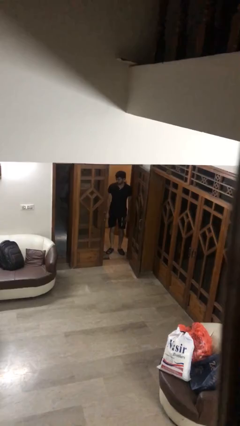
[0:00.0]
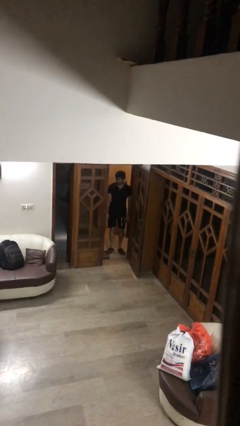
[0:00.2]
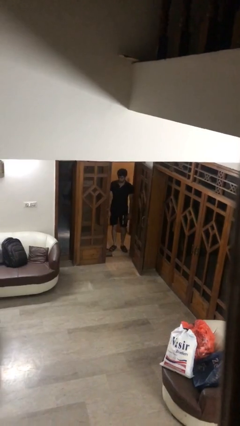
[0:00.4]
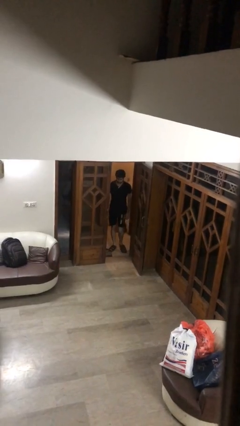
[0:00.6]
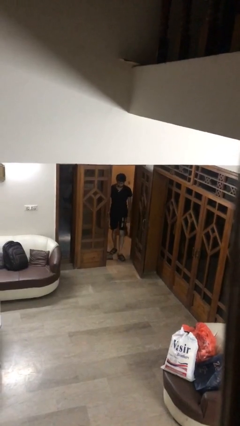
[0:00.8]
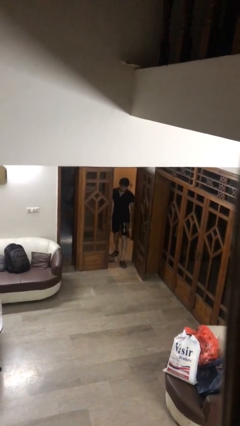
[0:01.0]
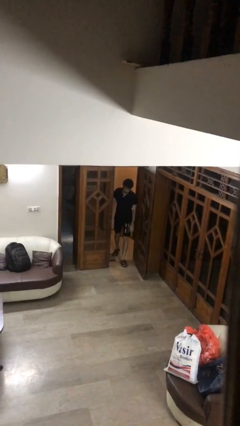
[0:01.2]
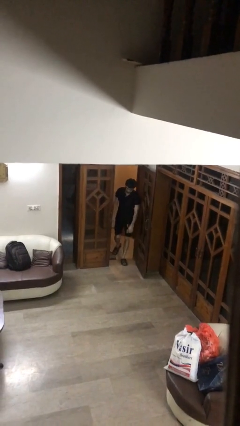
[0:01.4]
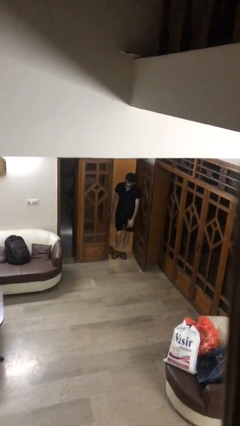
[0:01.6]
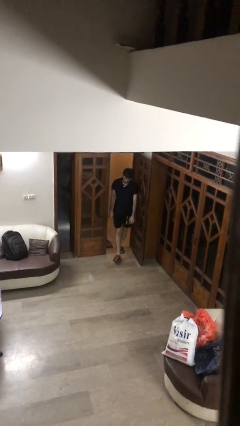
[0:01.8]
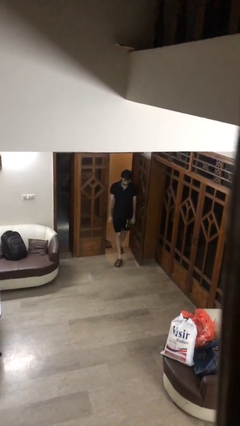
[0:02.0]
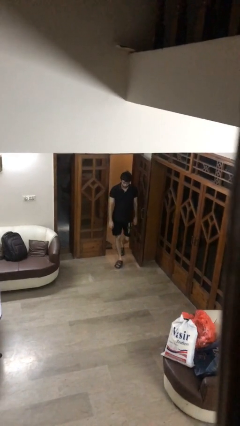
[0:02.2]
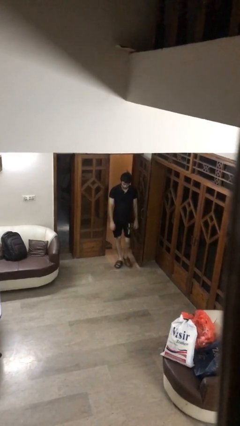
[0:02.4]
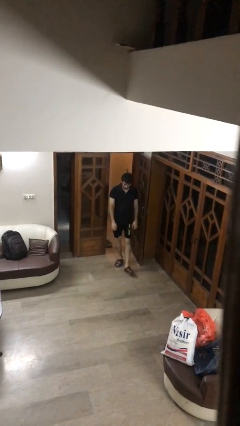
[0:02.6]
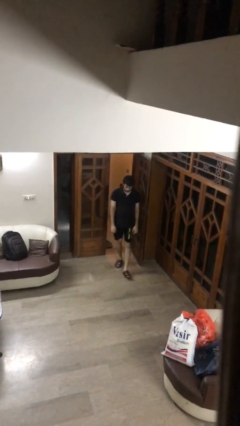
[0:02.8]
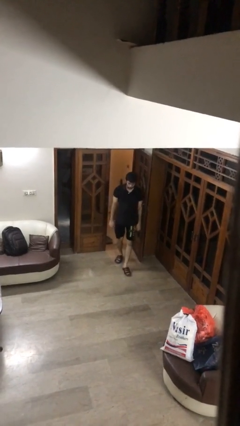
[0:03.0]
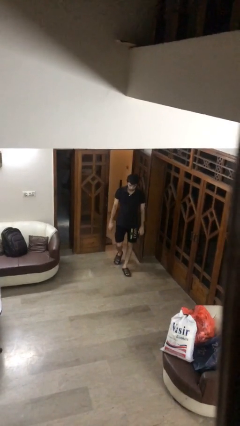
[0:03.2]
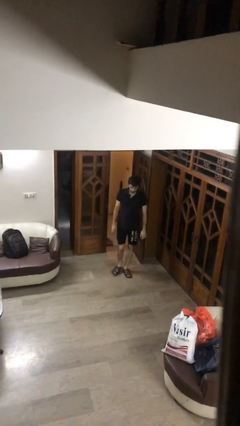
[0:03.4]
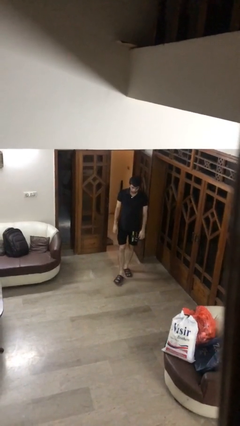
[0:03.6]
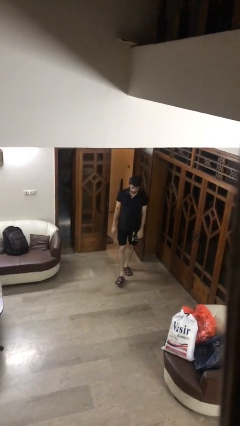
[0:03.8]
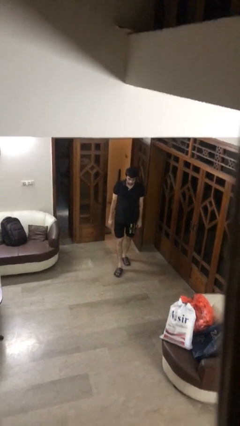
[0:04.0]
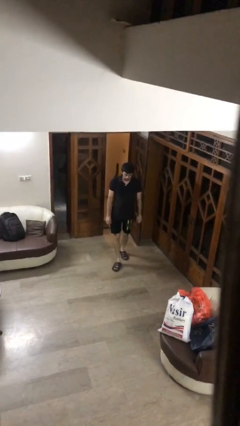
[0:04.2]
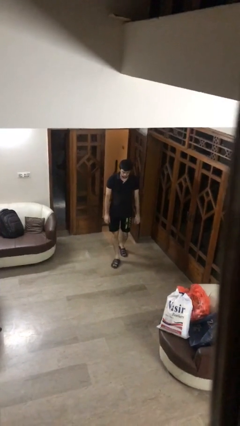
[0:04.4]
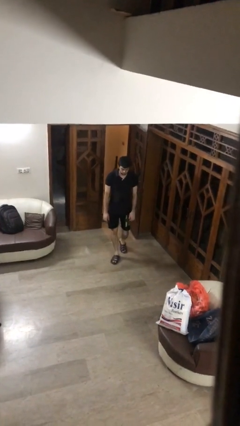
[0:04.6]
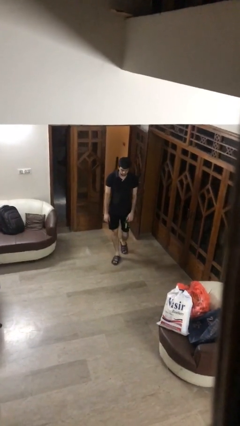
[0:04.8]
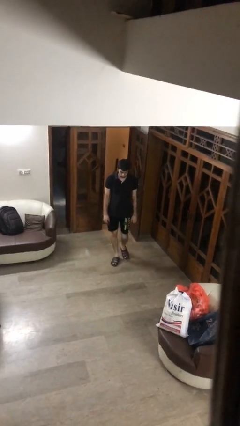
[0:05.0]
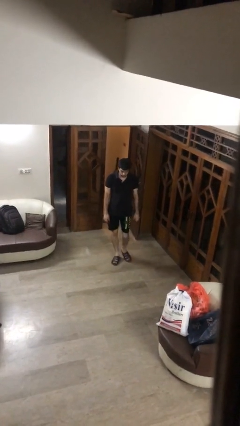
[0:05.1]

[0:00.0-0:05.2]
person enters scene through structure

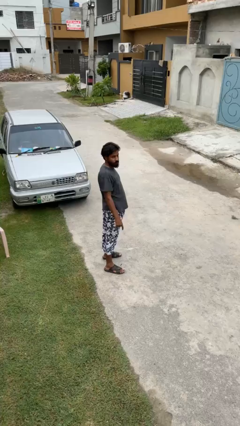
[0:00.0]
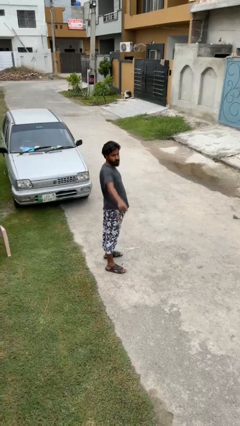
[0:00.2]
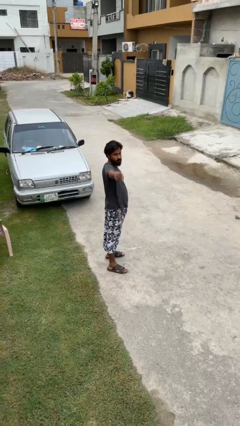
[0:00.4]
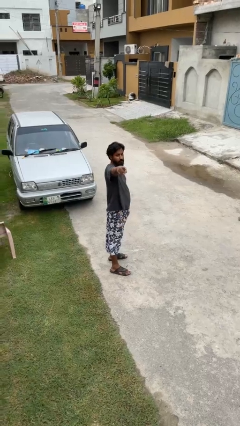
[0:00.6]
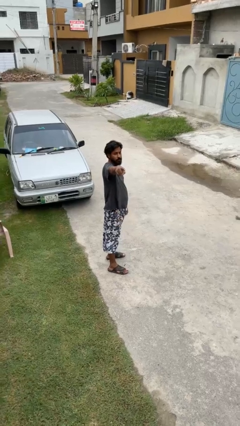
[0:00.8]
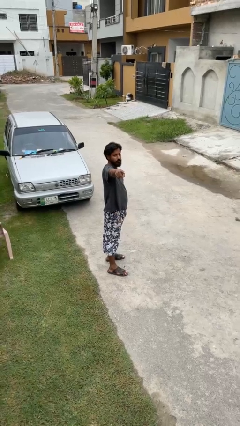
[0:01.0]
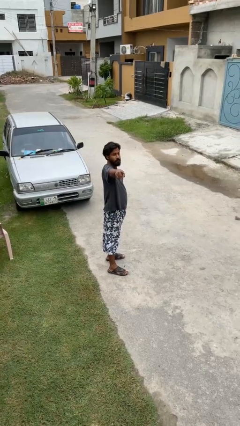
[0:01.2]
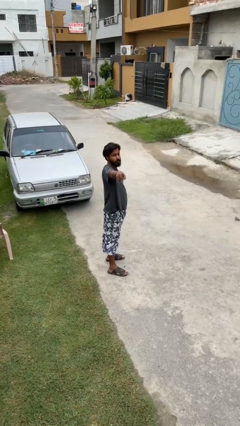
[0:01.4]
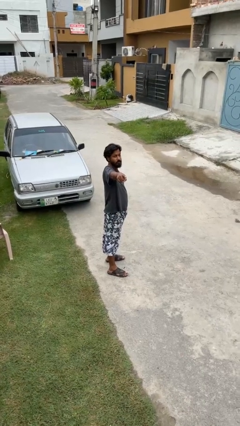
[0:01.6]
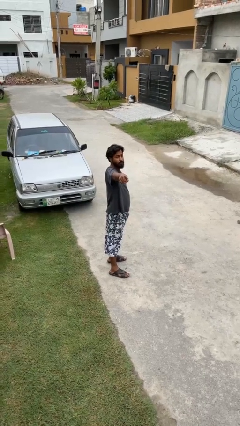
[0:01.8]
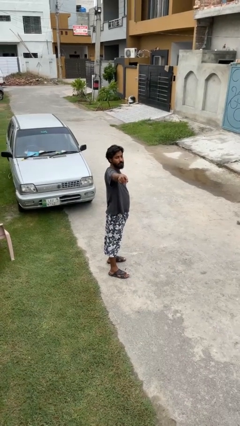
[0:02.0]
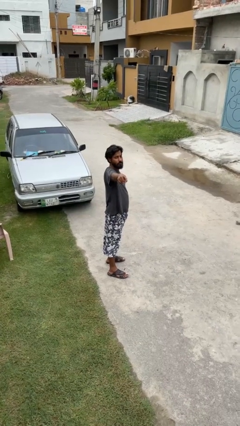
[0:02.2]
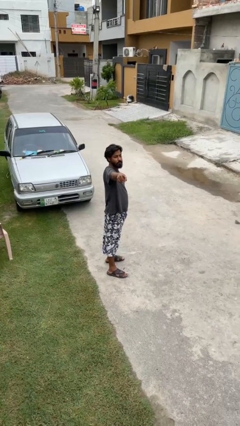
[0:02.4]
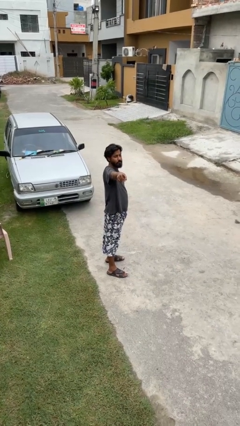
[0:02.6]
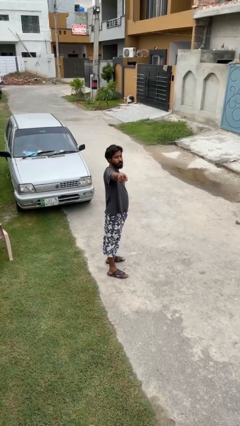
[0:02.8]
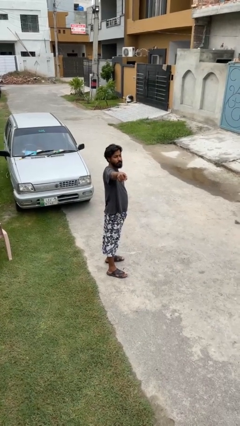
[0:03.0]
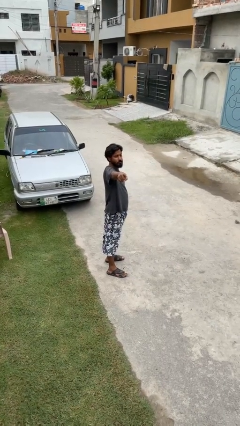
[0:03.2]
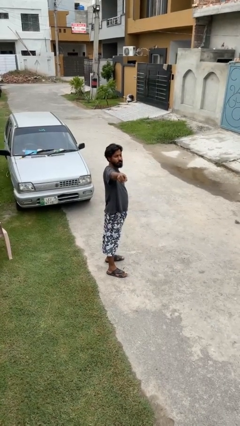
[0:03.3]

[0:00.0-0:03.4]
person points at person

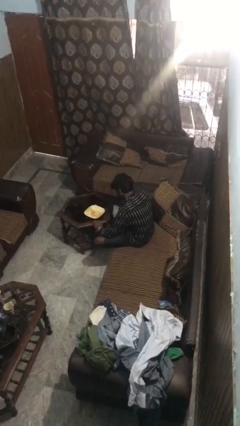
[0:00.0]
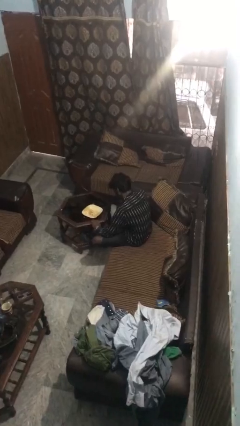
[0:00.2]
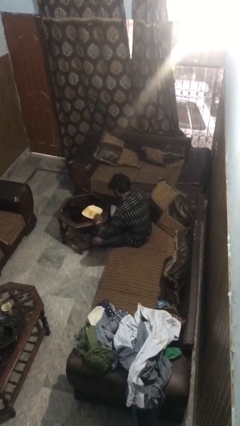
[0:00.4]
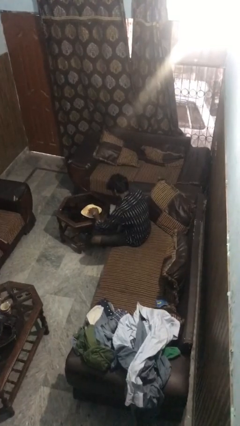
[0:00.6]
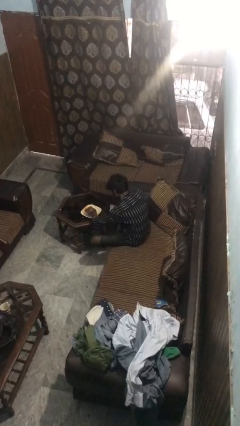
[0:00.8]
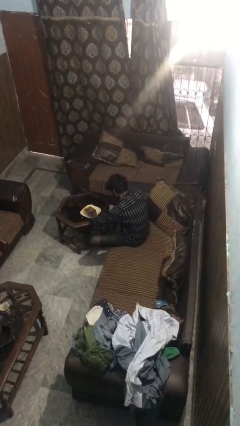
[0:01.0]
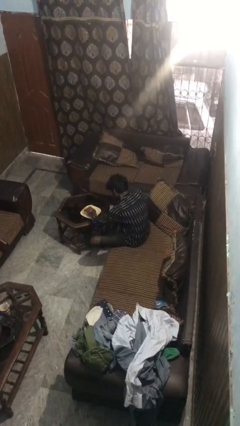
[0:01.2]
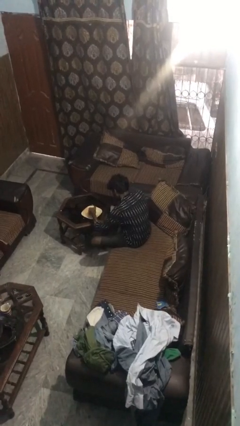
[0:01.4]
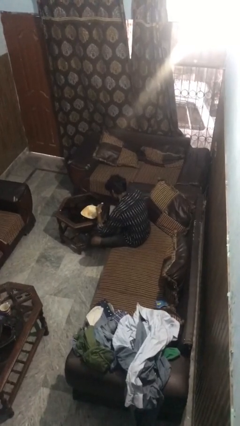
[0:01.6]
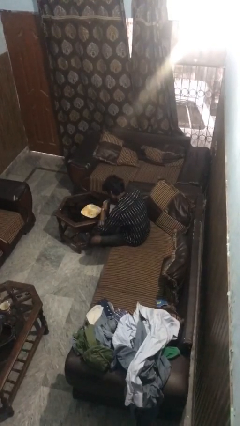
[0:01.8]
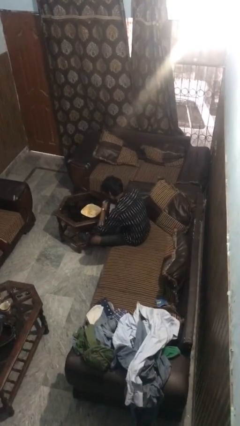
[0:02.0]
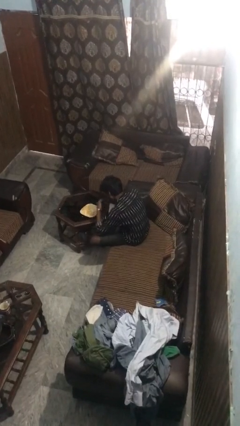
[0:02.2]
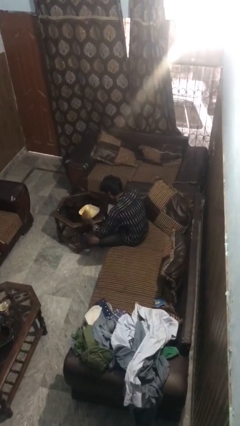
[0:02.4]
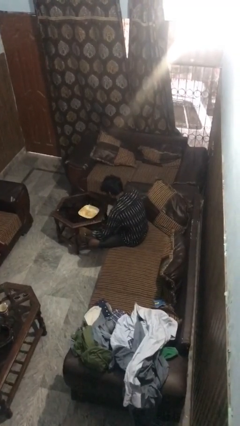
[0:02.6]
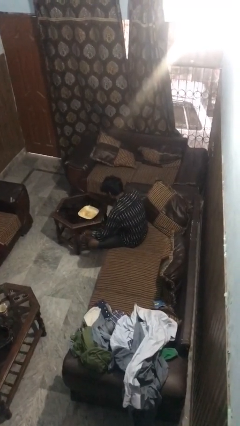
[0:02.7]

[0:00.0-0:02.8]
person eats with hands

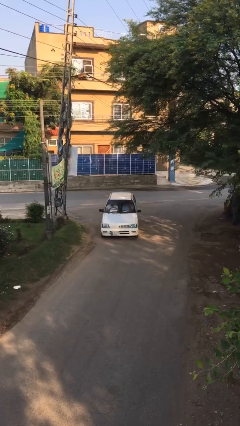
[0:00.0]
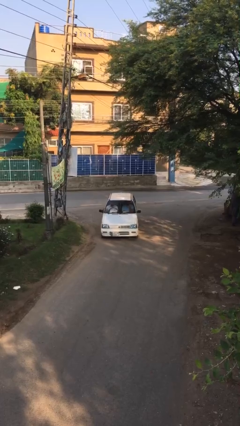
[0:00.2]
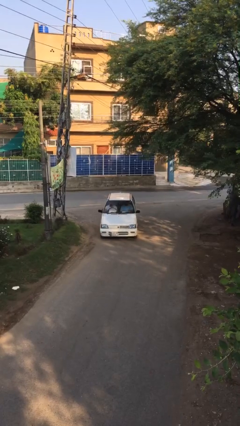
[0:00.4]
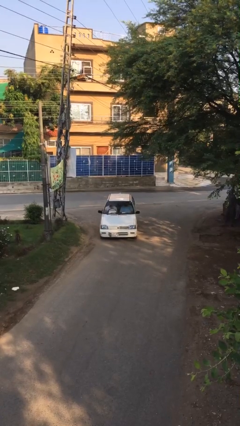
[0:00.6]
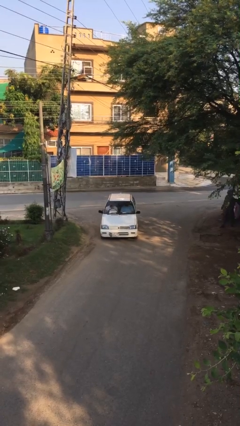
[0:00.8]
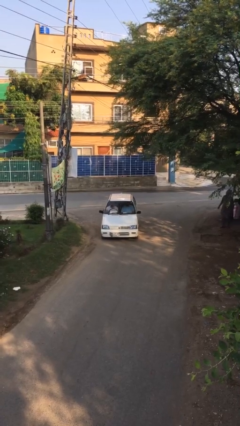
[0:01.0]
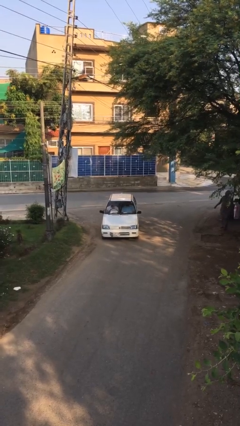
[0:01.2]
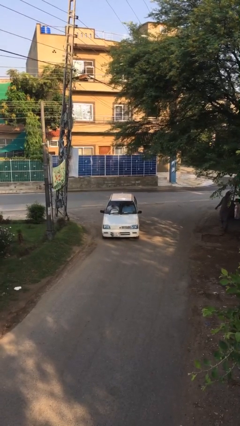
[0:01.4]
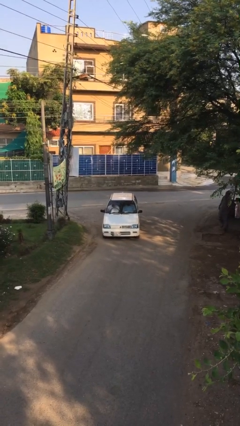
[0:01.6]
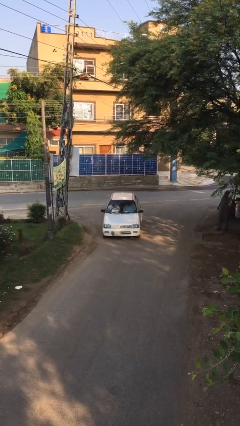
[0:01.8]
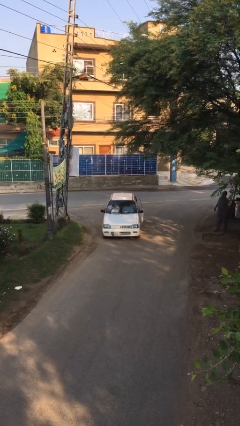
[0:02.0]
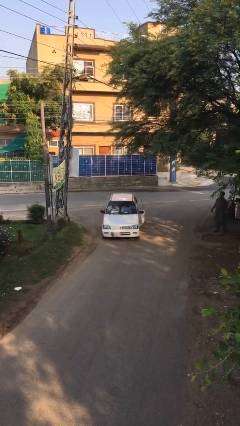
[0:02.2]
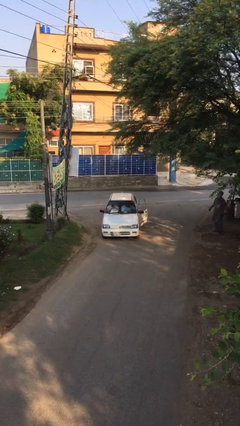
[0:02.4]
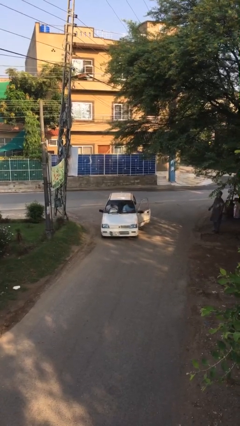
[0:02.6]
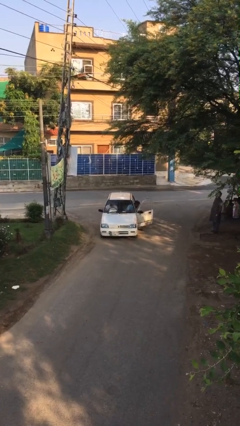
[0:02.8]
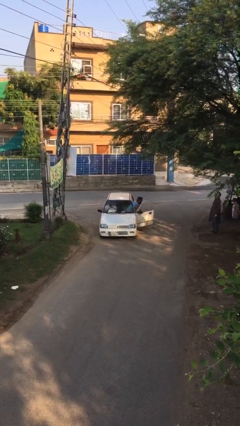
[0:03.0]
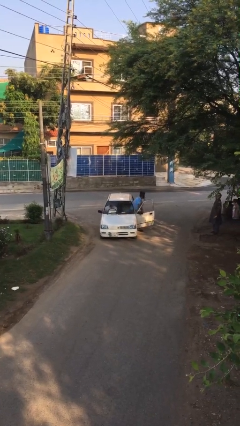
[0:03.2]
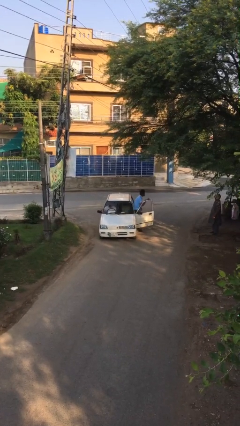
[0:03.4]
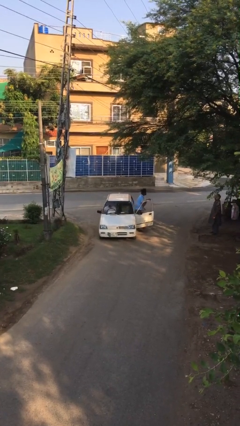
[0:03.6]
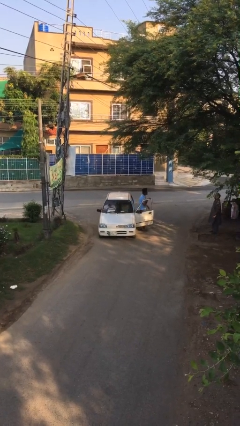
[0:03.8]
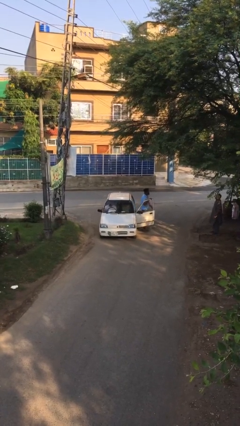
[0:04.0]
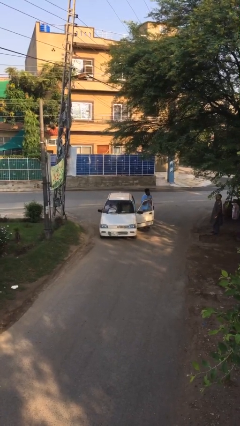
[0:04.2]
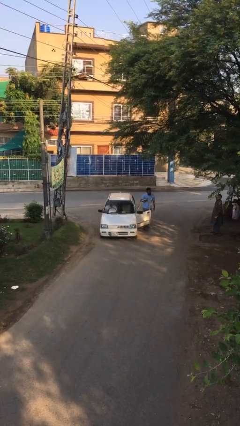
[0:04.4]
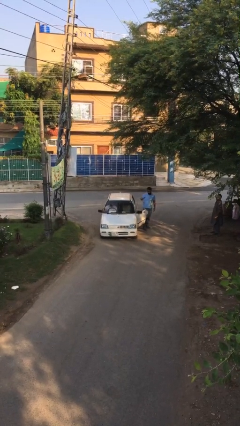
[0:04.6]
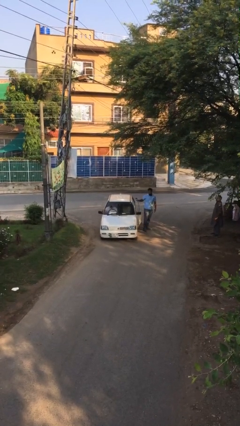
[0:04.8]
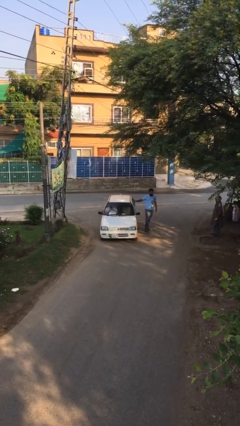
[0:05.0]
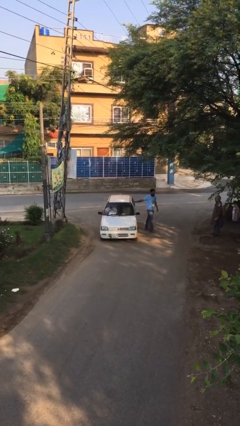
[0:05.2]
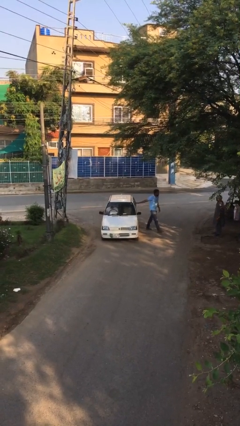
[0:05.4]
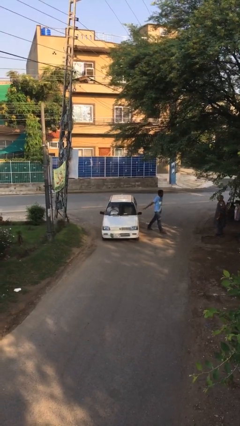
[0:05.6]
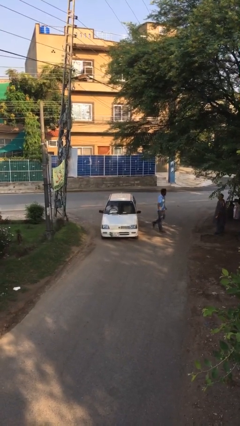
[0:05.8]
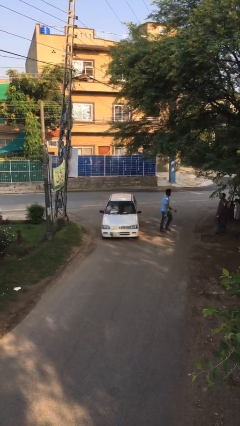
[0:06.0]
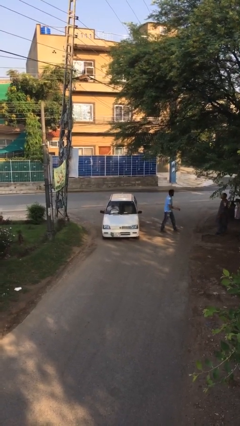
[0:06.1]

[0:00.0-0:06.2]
car drops off person
